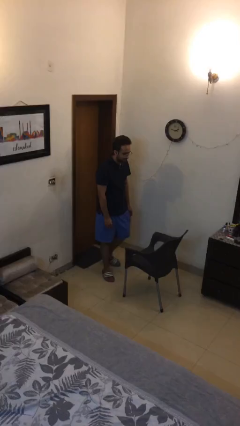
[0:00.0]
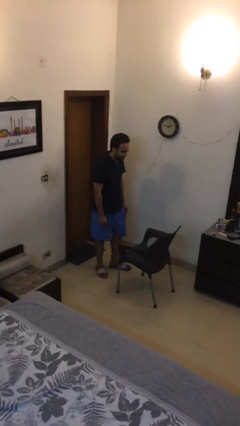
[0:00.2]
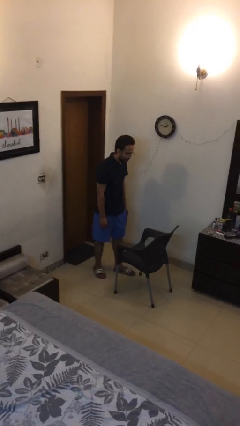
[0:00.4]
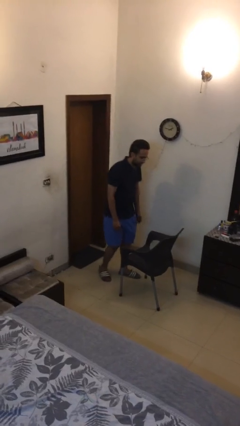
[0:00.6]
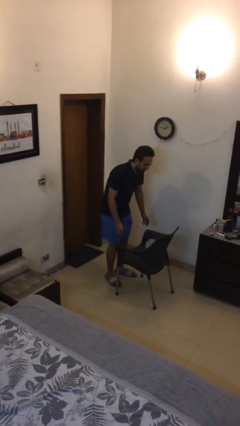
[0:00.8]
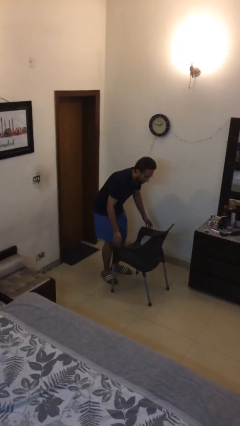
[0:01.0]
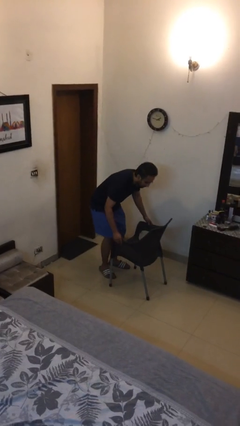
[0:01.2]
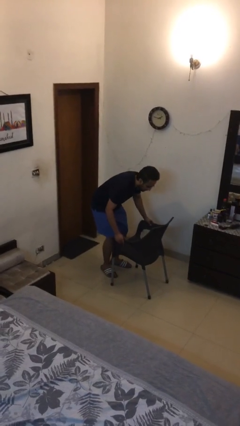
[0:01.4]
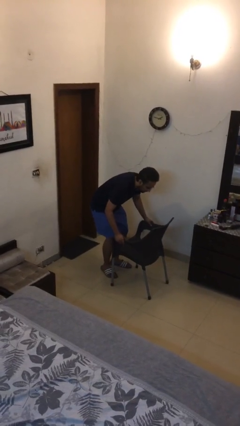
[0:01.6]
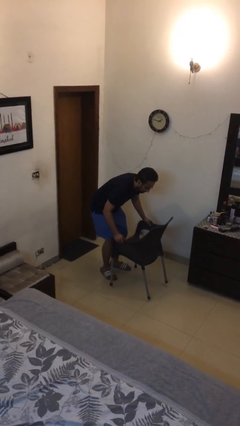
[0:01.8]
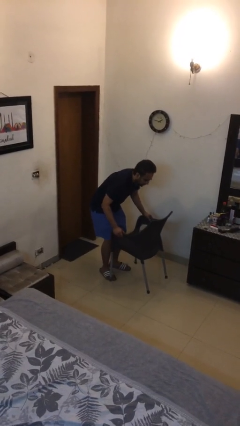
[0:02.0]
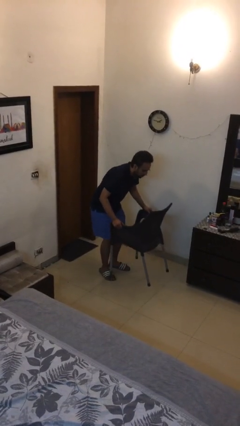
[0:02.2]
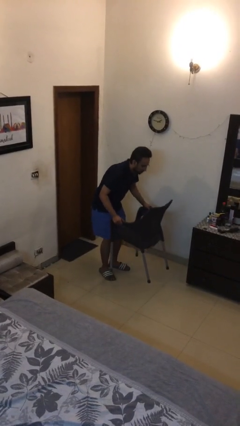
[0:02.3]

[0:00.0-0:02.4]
person picks up object from floor

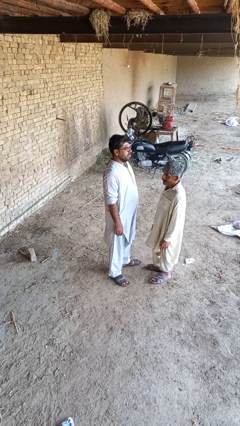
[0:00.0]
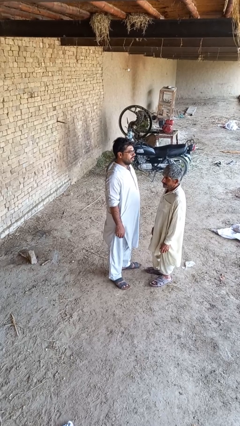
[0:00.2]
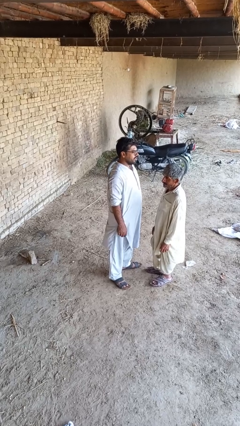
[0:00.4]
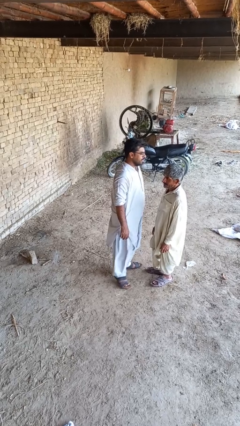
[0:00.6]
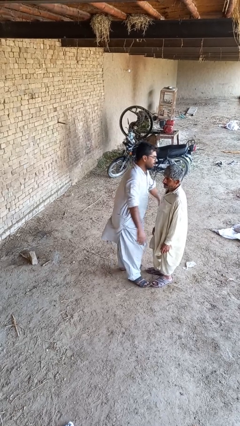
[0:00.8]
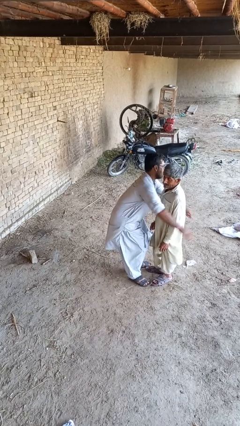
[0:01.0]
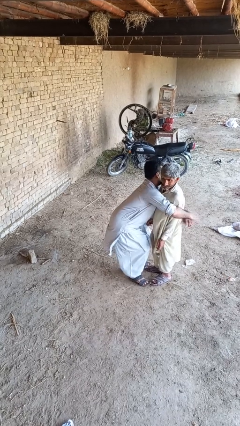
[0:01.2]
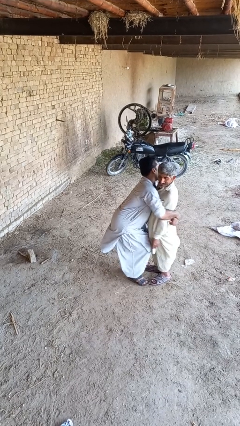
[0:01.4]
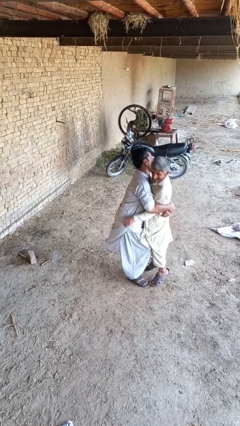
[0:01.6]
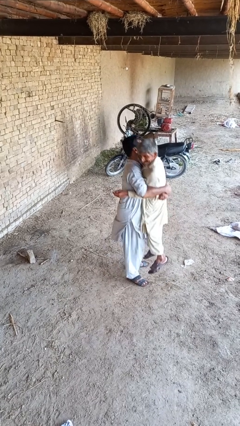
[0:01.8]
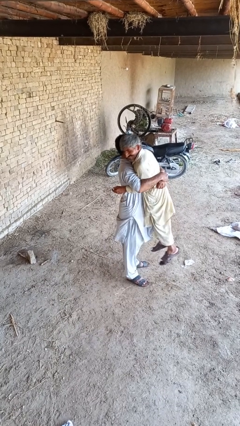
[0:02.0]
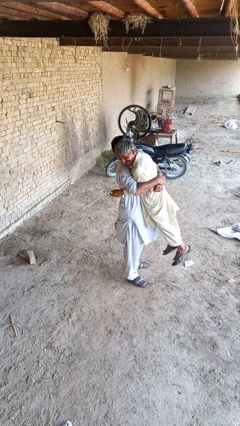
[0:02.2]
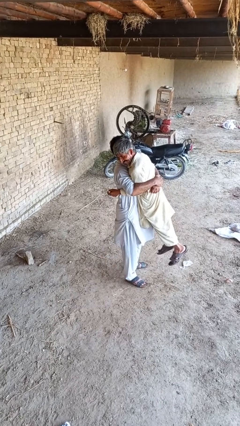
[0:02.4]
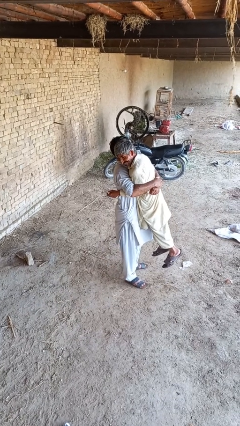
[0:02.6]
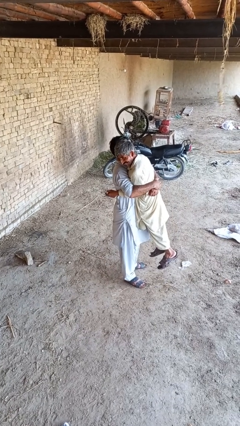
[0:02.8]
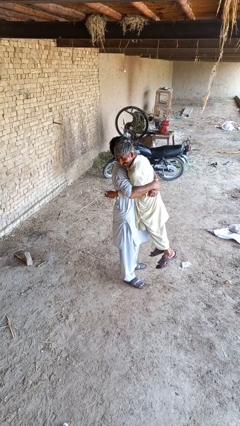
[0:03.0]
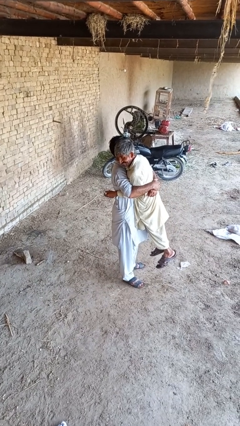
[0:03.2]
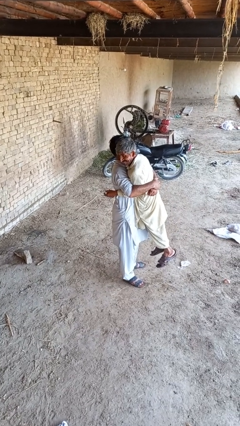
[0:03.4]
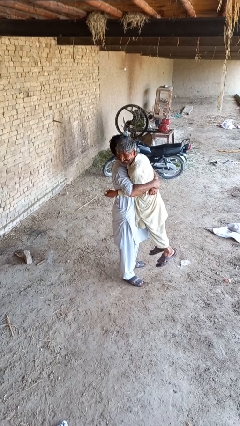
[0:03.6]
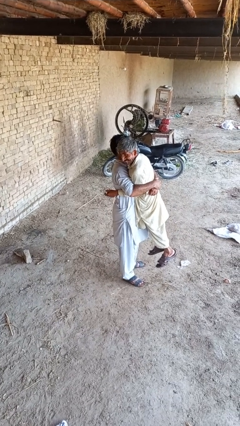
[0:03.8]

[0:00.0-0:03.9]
person picks up person

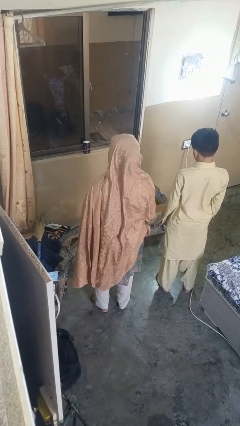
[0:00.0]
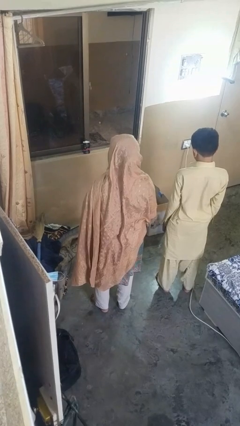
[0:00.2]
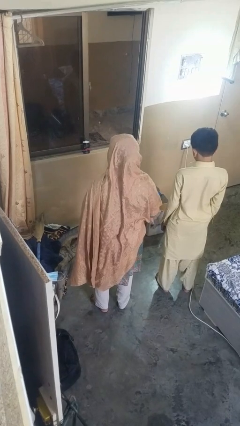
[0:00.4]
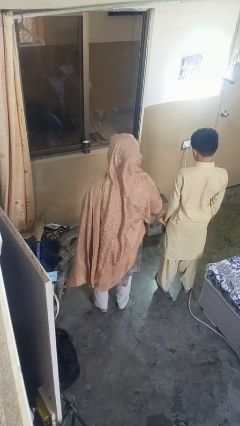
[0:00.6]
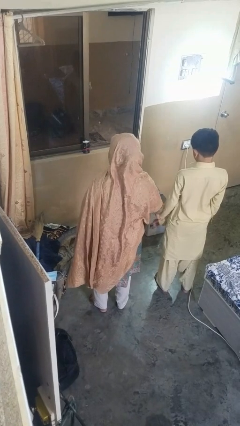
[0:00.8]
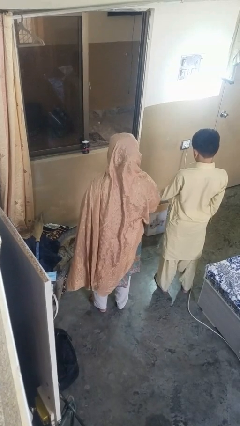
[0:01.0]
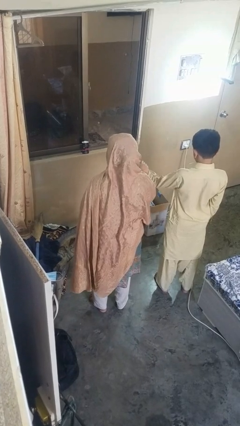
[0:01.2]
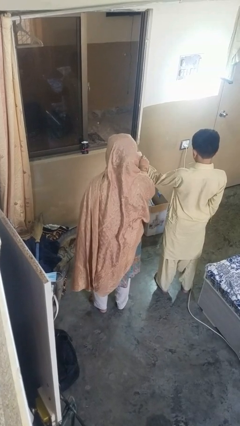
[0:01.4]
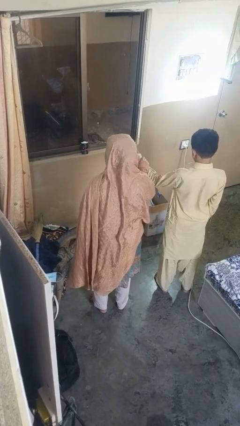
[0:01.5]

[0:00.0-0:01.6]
person grabs person by forearm

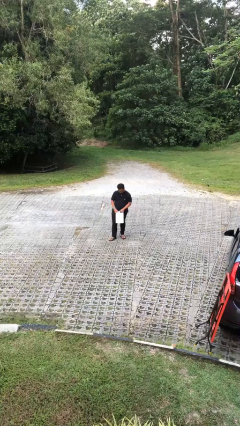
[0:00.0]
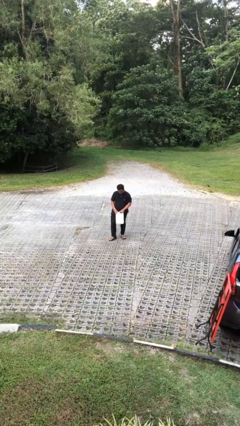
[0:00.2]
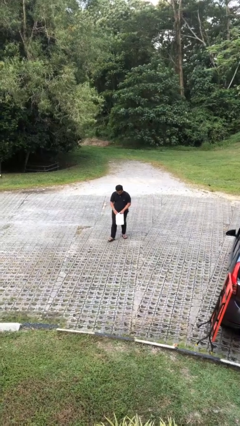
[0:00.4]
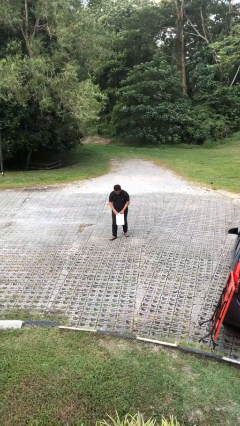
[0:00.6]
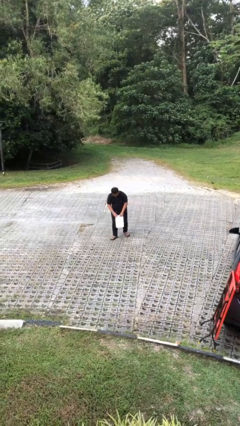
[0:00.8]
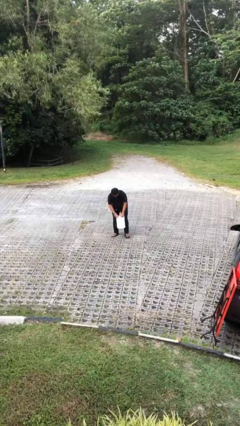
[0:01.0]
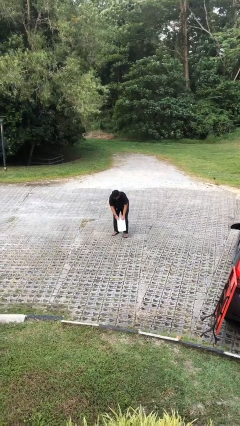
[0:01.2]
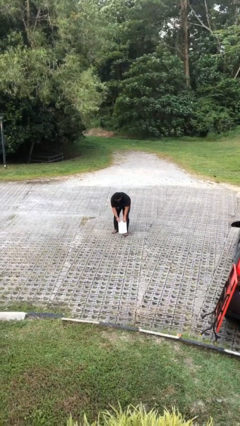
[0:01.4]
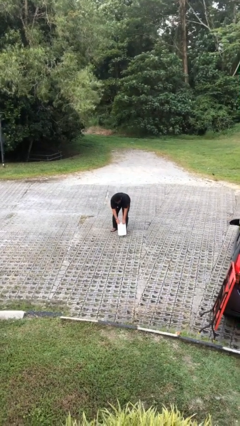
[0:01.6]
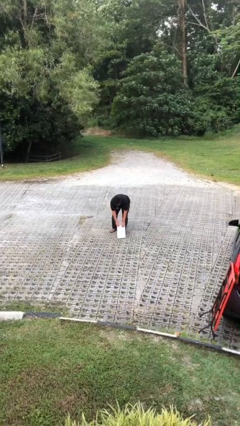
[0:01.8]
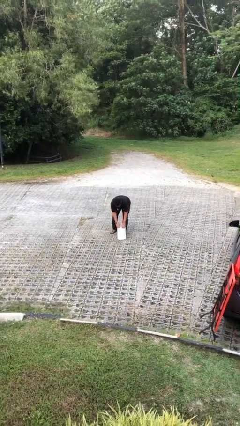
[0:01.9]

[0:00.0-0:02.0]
person puts down object on floor

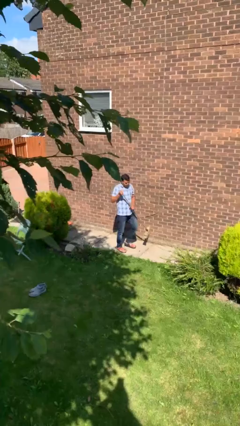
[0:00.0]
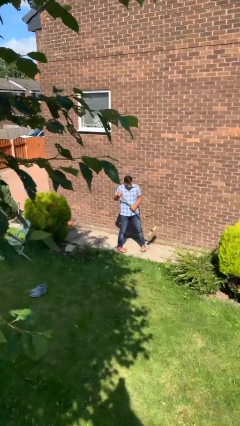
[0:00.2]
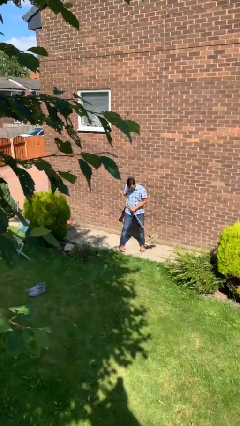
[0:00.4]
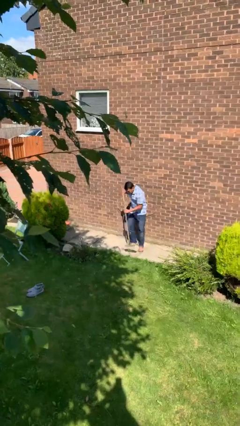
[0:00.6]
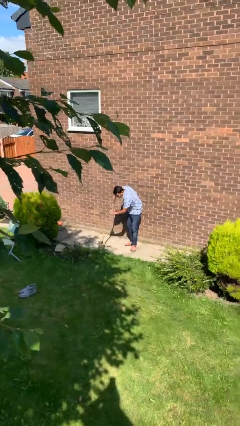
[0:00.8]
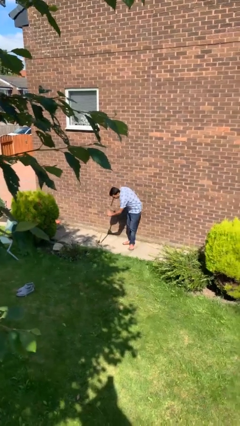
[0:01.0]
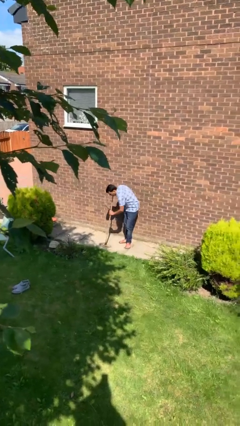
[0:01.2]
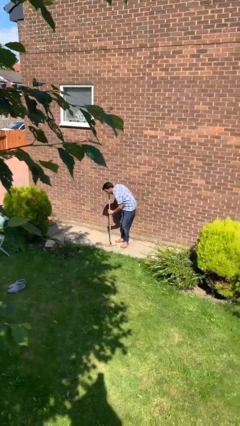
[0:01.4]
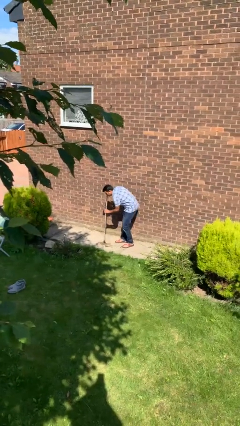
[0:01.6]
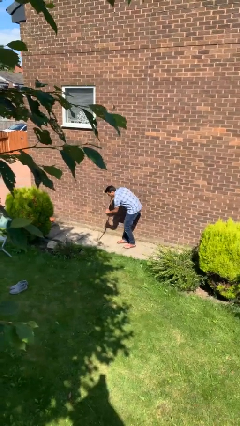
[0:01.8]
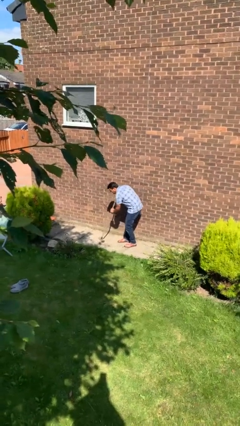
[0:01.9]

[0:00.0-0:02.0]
person sweeps floor

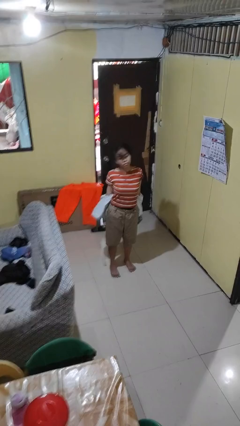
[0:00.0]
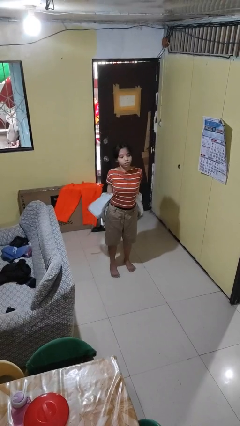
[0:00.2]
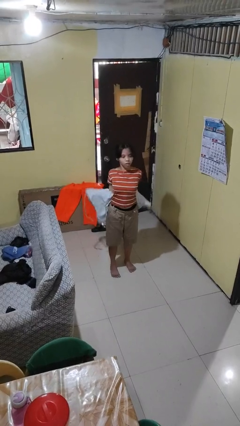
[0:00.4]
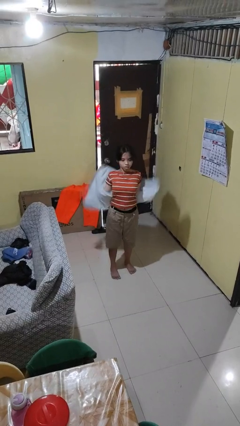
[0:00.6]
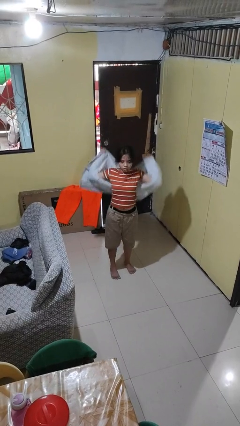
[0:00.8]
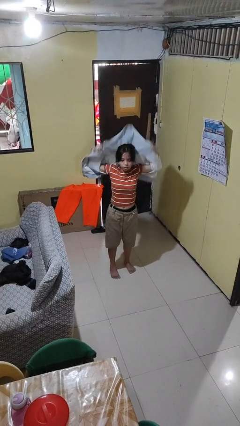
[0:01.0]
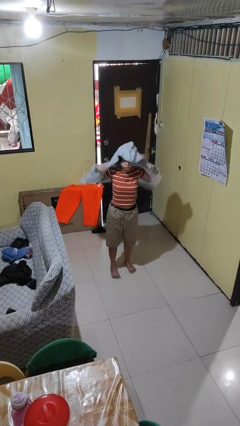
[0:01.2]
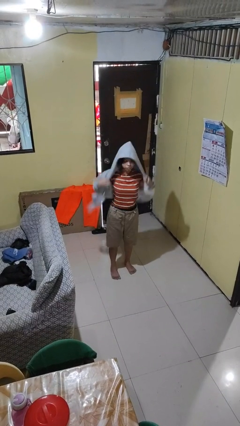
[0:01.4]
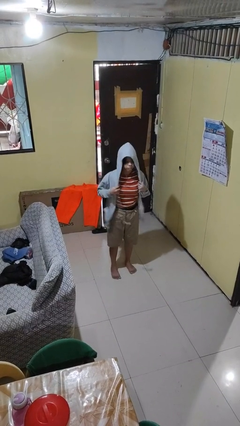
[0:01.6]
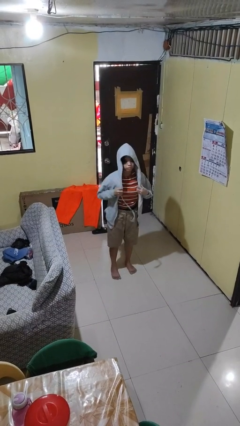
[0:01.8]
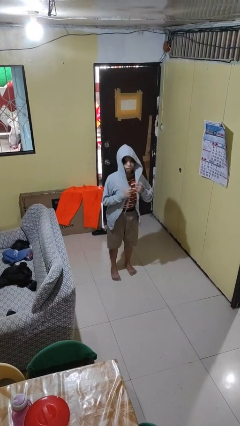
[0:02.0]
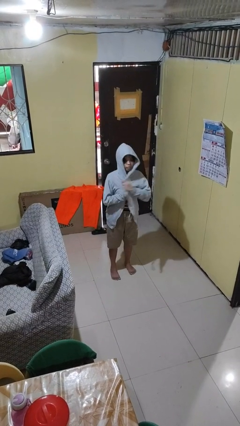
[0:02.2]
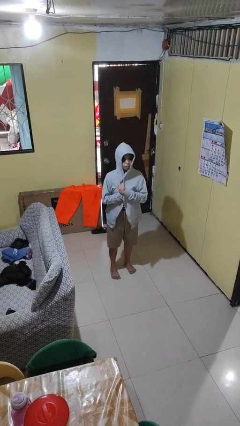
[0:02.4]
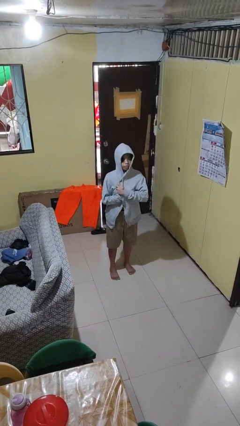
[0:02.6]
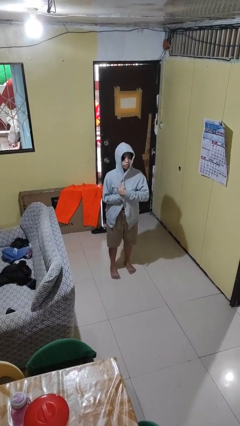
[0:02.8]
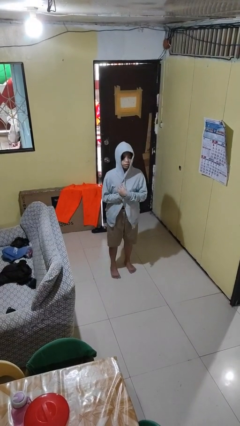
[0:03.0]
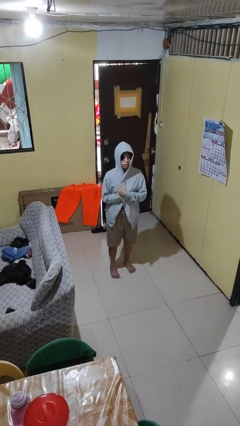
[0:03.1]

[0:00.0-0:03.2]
person puts on hoodie

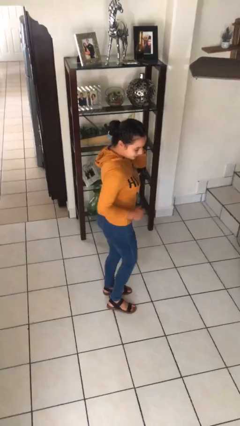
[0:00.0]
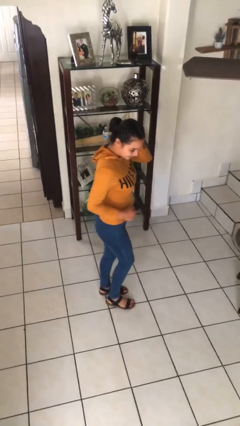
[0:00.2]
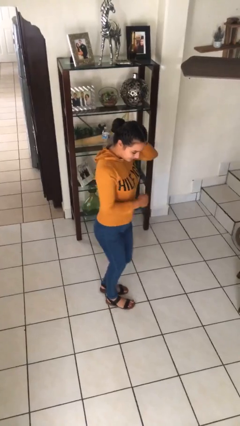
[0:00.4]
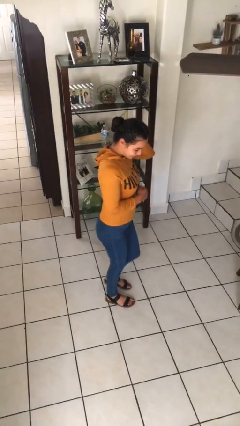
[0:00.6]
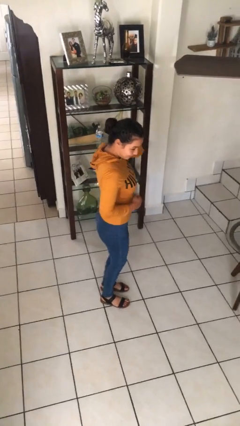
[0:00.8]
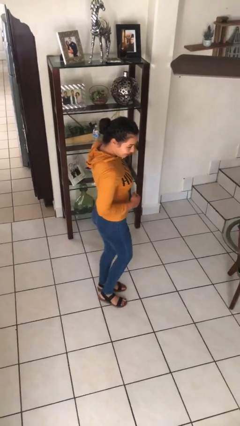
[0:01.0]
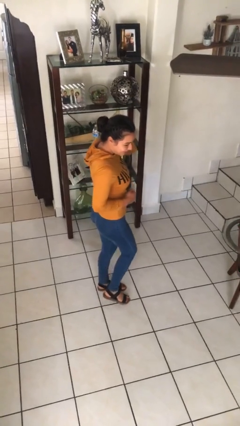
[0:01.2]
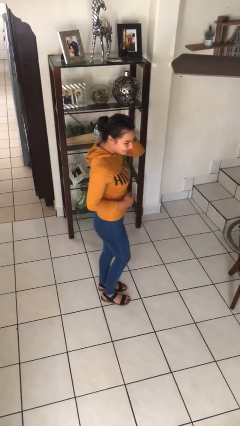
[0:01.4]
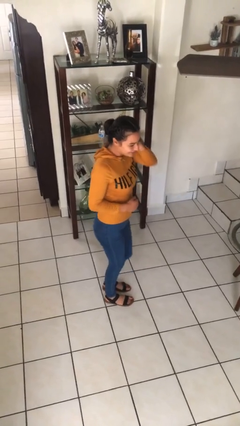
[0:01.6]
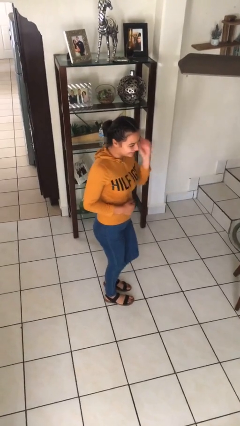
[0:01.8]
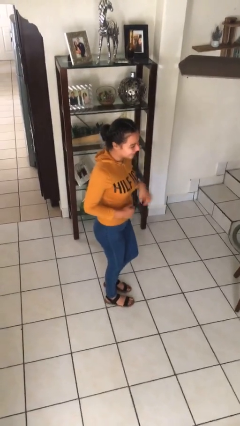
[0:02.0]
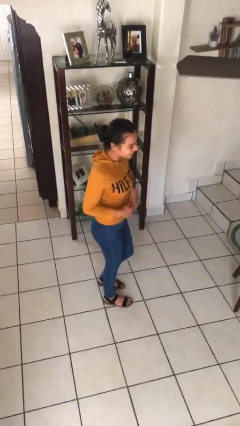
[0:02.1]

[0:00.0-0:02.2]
person dances in place
